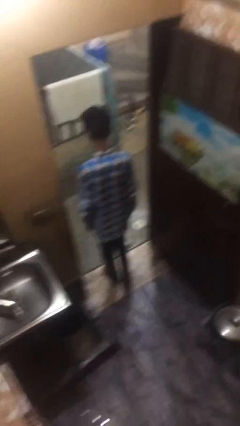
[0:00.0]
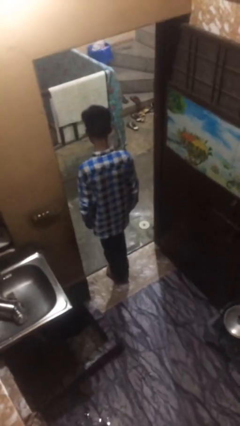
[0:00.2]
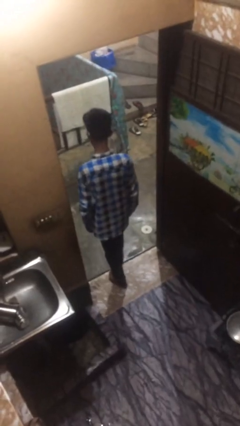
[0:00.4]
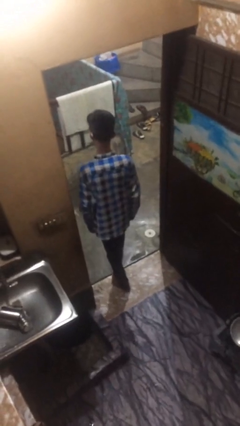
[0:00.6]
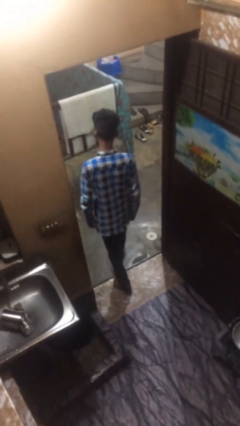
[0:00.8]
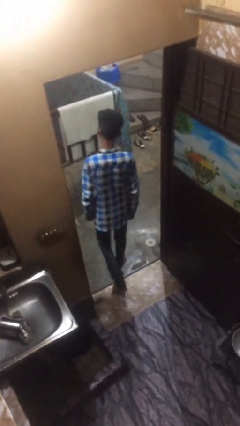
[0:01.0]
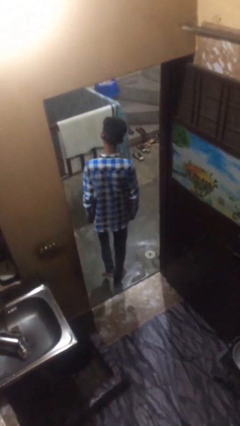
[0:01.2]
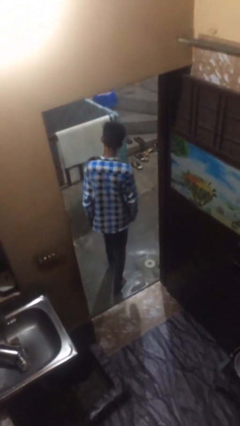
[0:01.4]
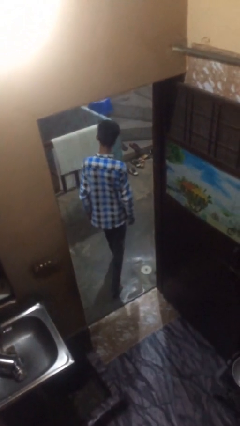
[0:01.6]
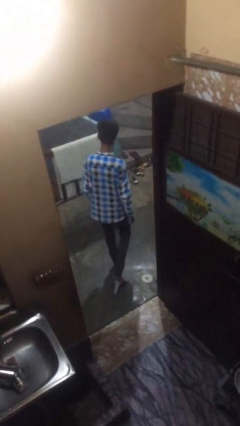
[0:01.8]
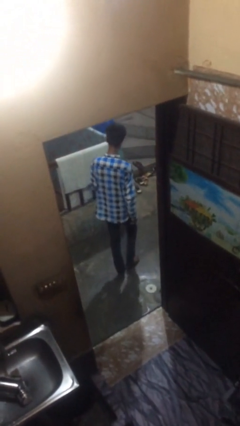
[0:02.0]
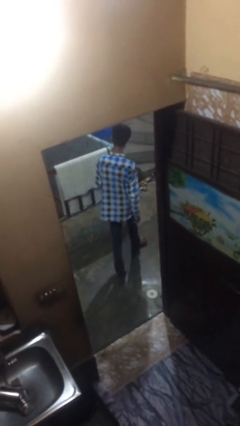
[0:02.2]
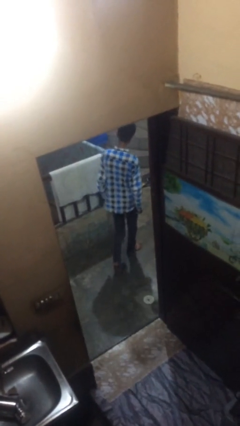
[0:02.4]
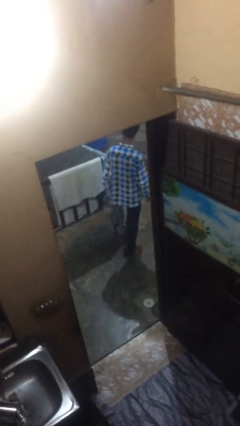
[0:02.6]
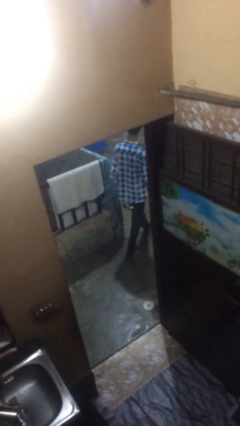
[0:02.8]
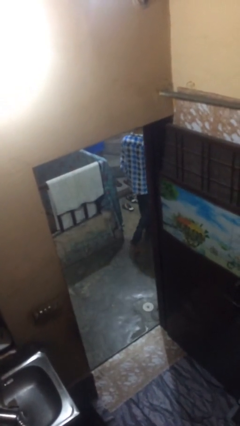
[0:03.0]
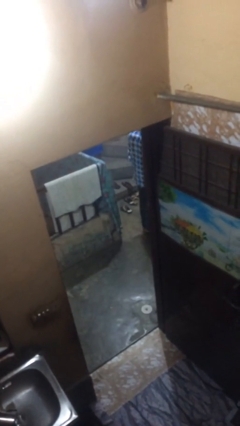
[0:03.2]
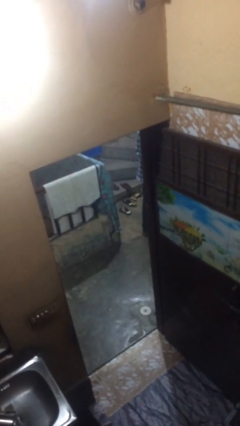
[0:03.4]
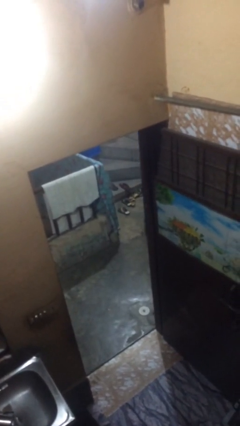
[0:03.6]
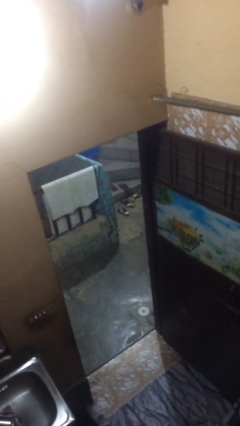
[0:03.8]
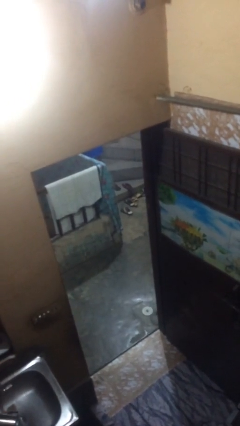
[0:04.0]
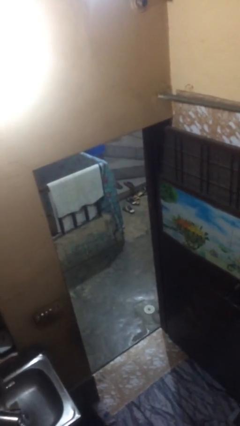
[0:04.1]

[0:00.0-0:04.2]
person exits scene through structure

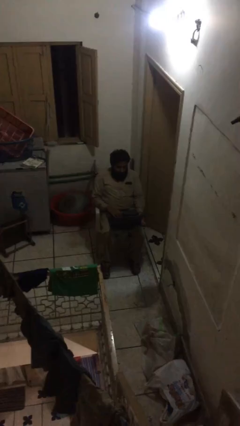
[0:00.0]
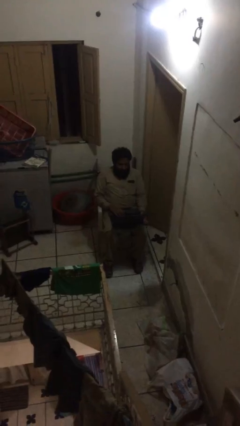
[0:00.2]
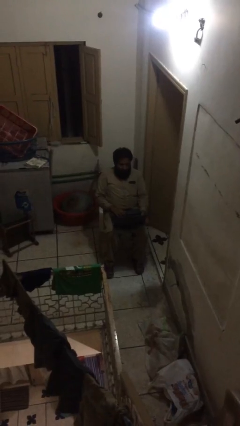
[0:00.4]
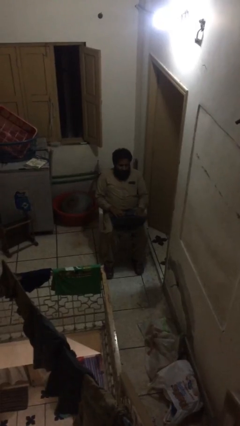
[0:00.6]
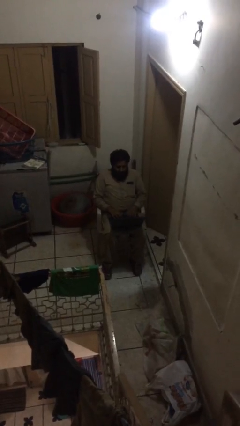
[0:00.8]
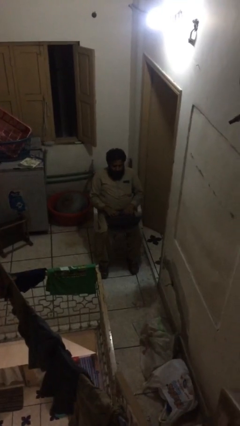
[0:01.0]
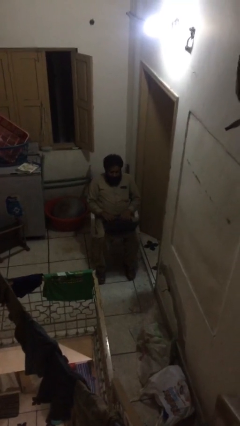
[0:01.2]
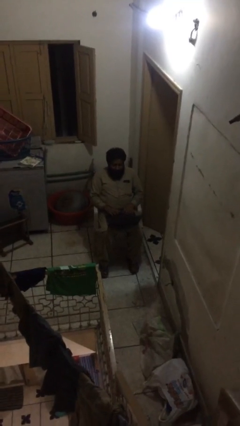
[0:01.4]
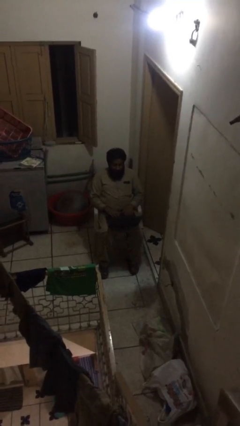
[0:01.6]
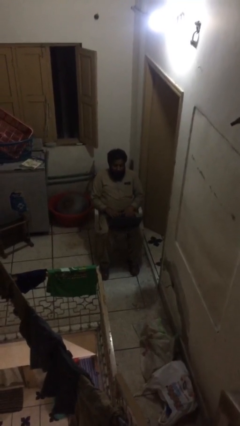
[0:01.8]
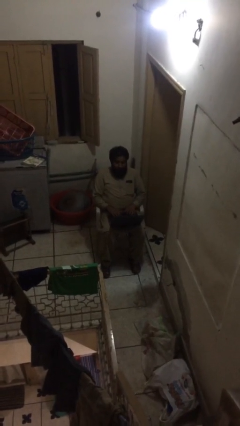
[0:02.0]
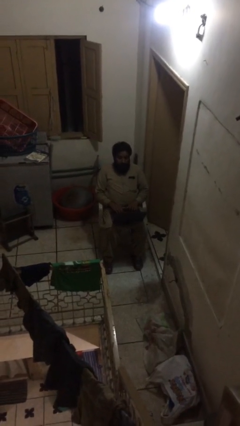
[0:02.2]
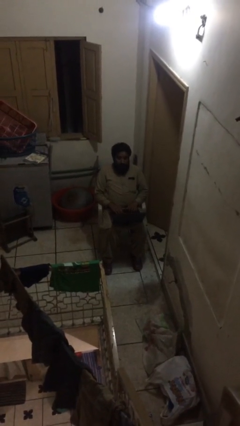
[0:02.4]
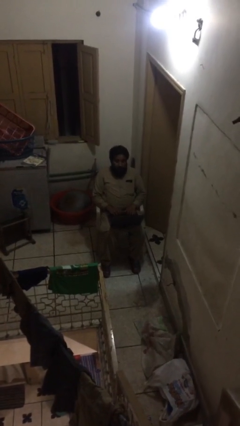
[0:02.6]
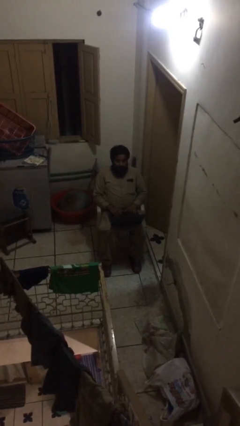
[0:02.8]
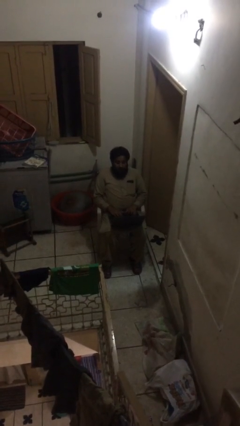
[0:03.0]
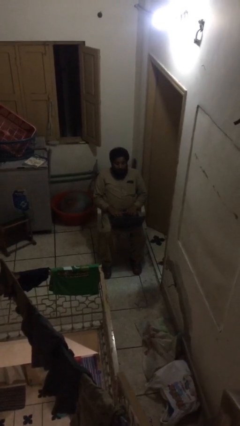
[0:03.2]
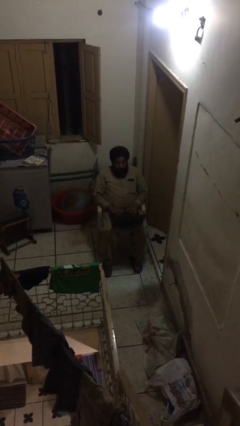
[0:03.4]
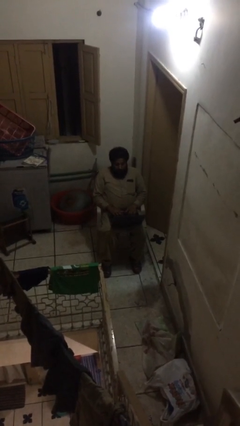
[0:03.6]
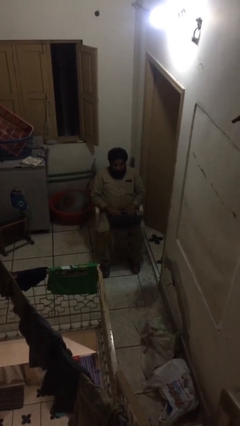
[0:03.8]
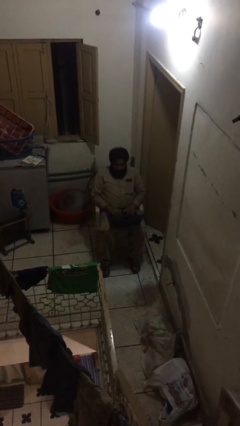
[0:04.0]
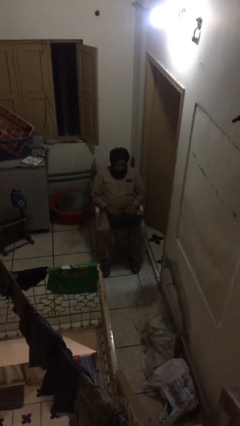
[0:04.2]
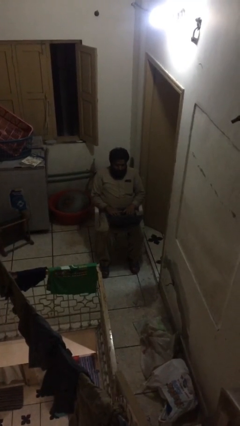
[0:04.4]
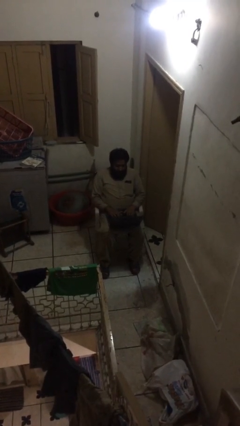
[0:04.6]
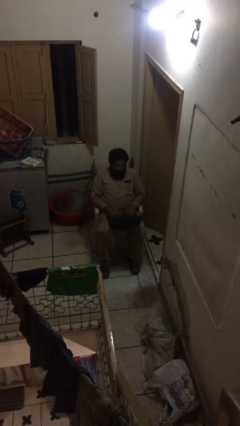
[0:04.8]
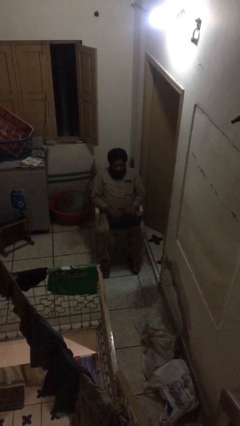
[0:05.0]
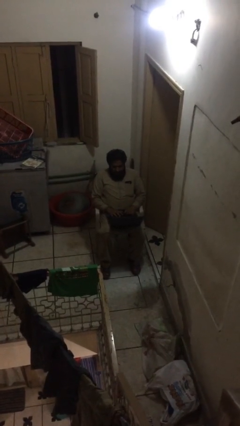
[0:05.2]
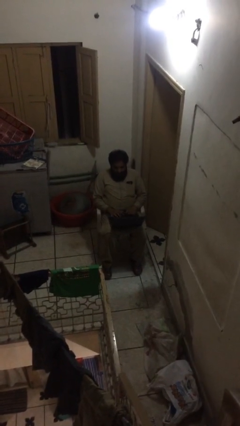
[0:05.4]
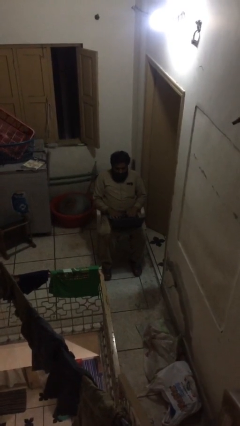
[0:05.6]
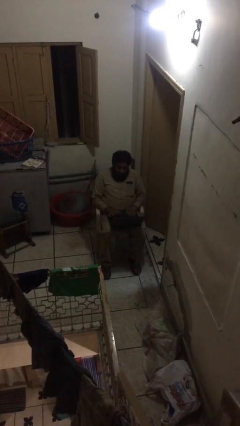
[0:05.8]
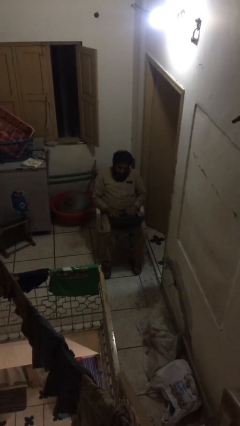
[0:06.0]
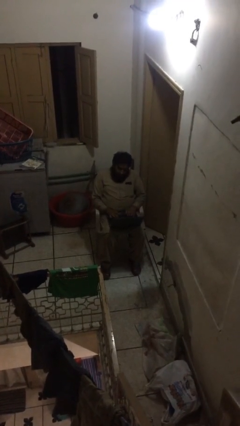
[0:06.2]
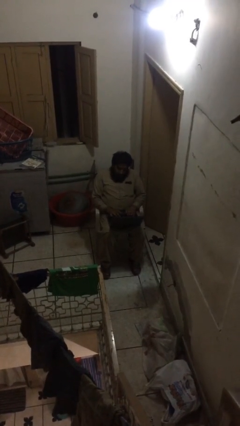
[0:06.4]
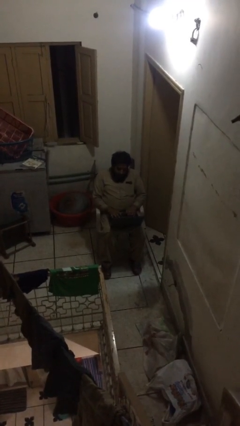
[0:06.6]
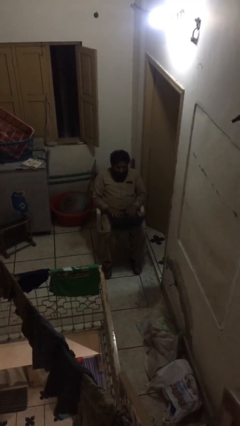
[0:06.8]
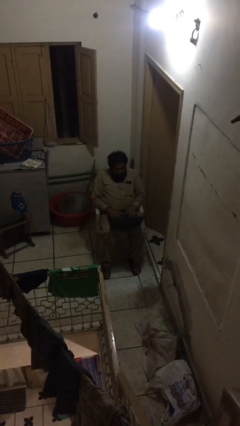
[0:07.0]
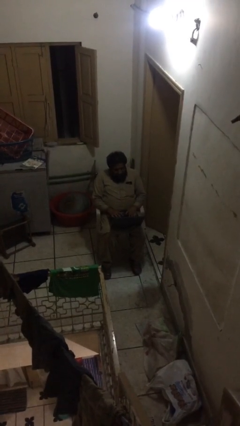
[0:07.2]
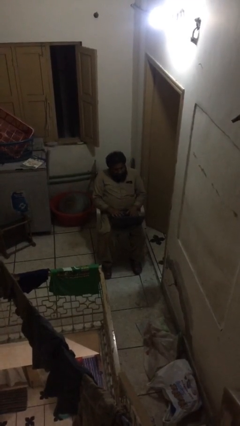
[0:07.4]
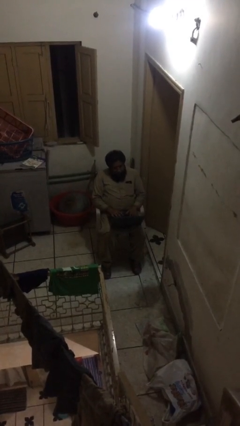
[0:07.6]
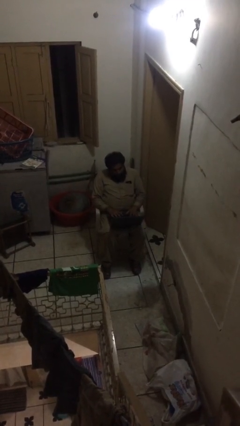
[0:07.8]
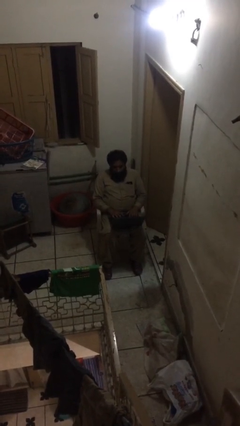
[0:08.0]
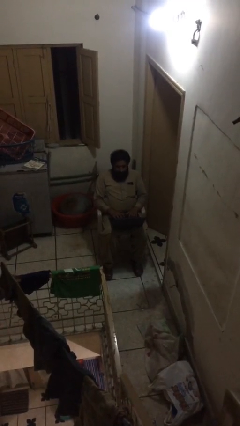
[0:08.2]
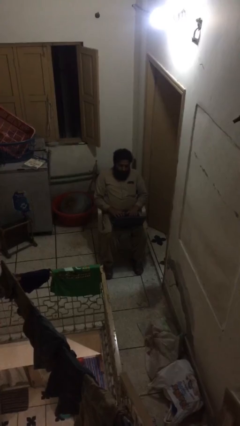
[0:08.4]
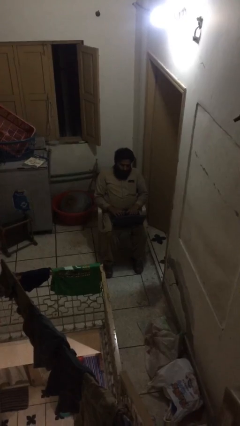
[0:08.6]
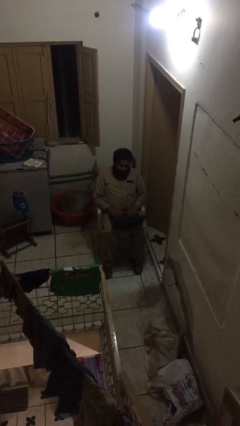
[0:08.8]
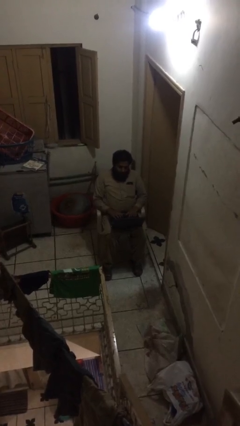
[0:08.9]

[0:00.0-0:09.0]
person interacts with laptop

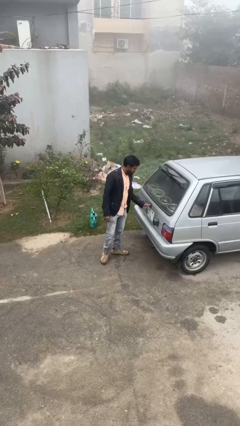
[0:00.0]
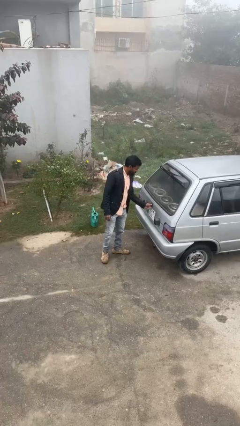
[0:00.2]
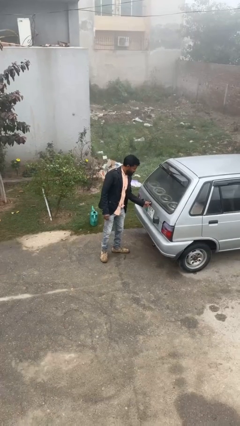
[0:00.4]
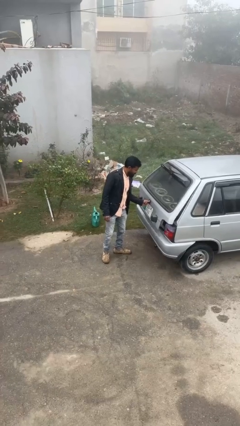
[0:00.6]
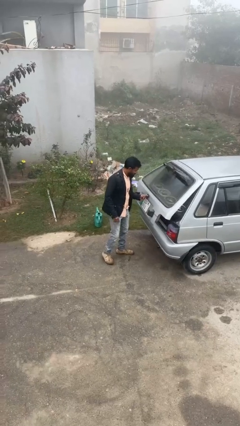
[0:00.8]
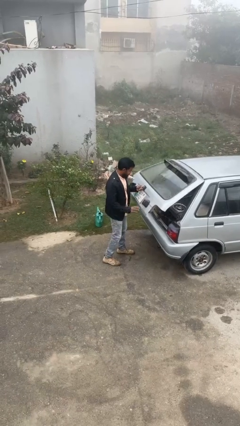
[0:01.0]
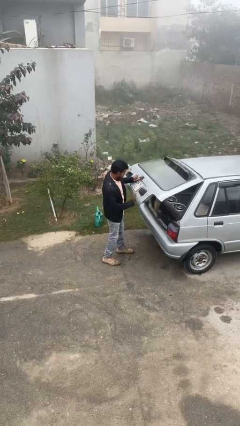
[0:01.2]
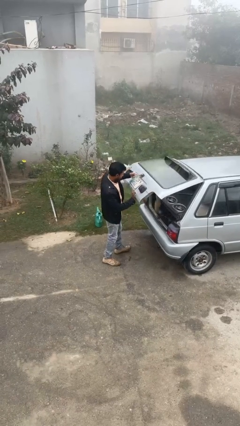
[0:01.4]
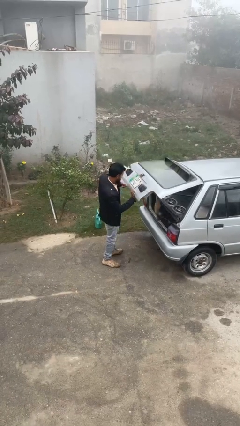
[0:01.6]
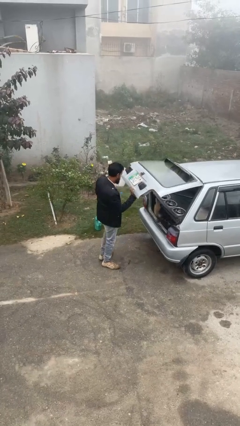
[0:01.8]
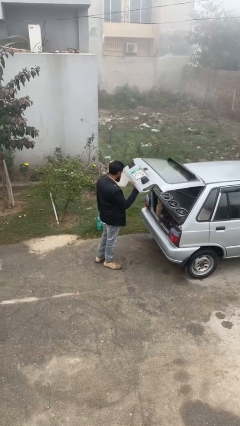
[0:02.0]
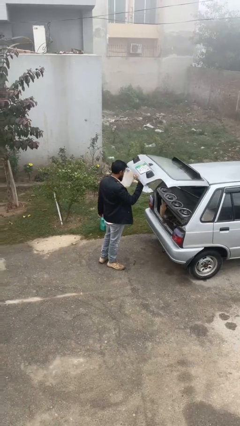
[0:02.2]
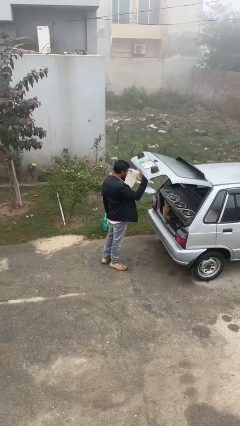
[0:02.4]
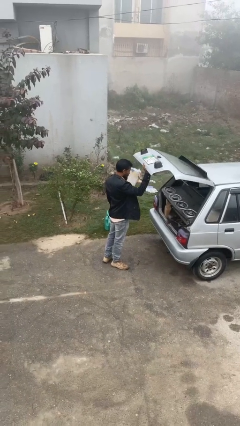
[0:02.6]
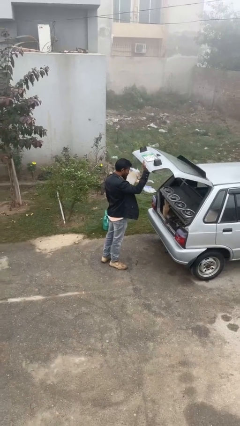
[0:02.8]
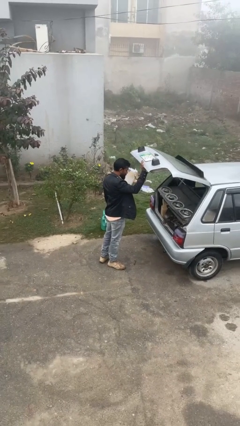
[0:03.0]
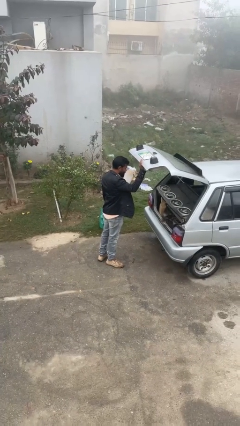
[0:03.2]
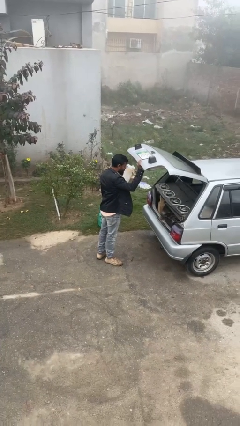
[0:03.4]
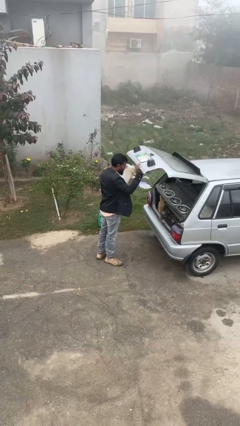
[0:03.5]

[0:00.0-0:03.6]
person opens car trunk

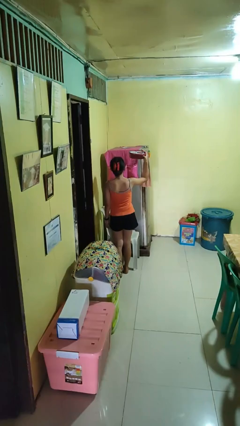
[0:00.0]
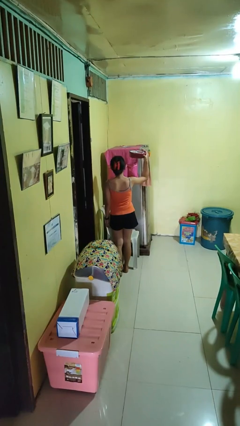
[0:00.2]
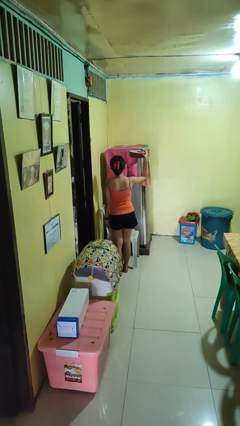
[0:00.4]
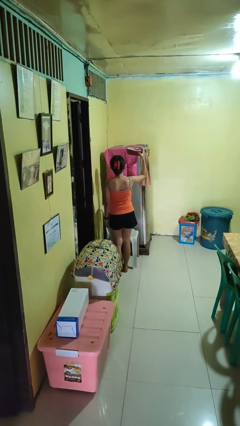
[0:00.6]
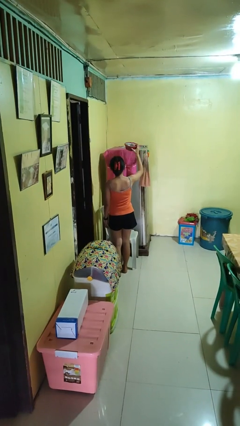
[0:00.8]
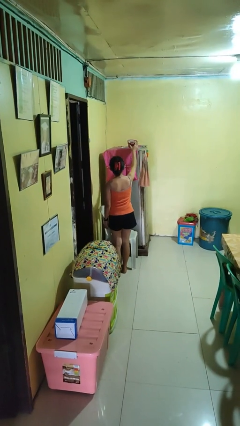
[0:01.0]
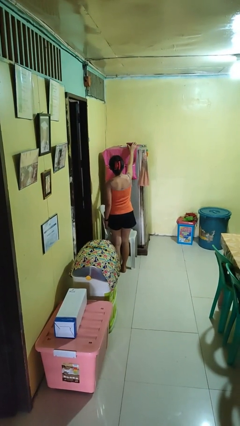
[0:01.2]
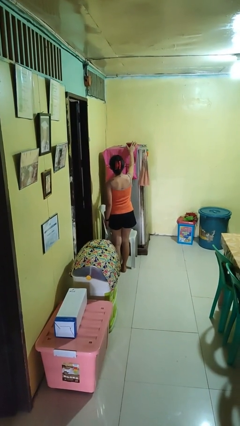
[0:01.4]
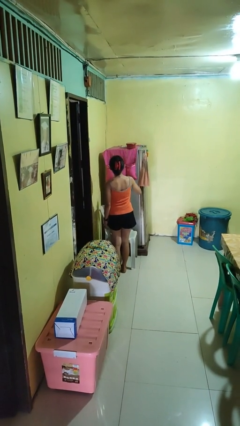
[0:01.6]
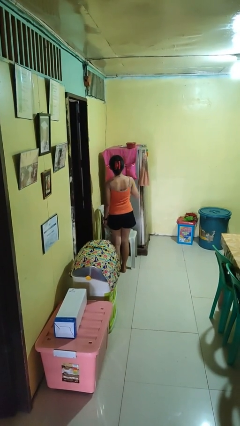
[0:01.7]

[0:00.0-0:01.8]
person puts down object on shelf
